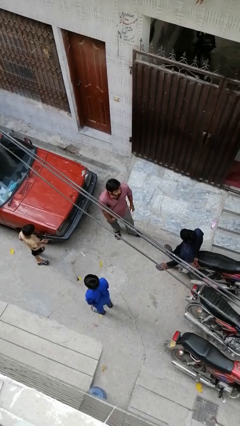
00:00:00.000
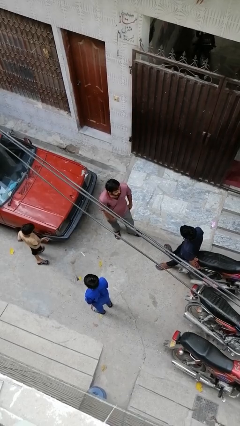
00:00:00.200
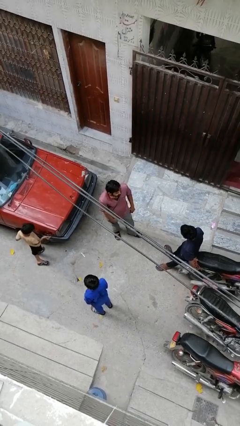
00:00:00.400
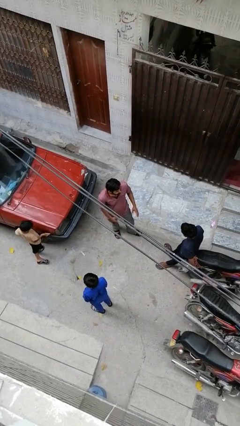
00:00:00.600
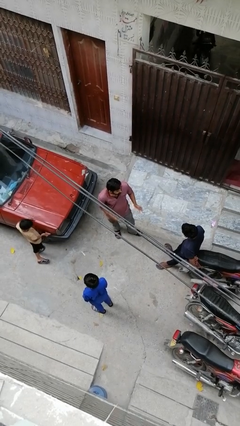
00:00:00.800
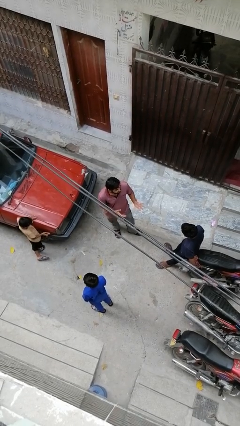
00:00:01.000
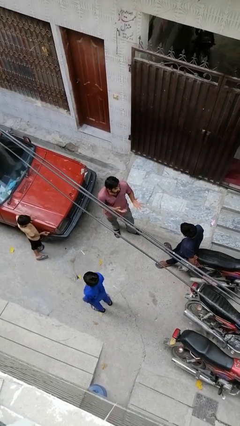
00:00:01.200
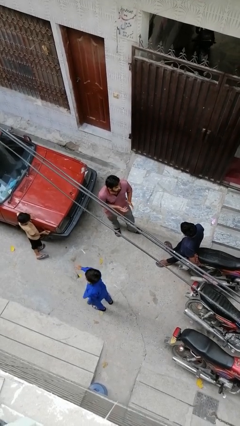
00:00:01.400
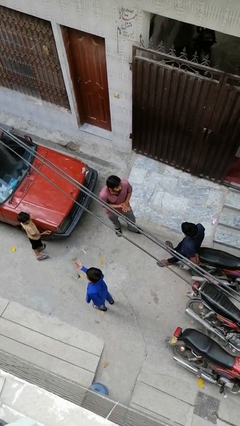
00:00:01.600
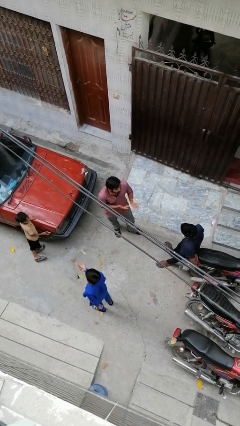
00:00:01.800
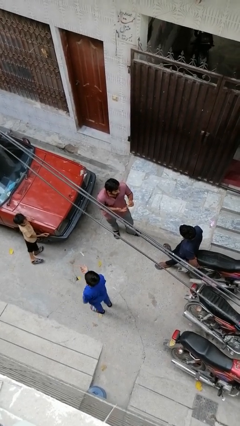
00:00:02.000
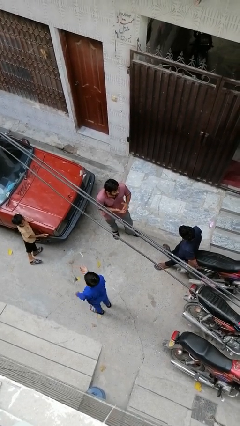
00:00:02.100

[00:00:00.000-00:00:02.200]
person talks to person

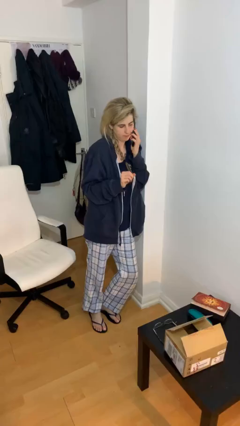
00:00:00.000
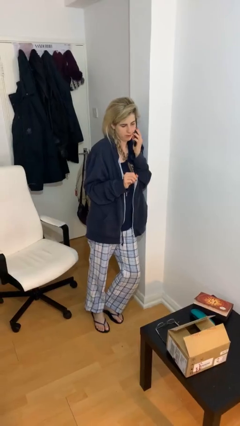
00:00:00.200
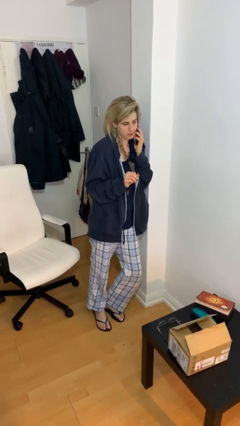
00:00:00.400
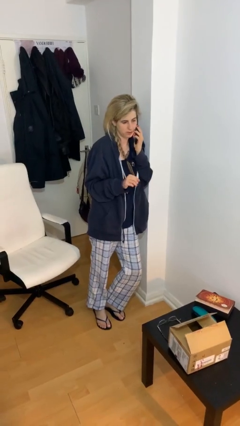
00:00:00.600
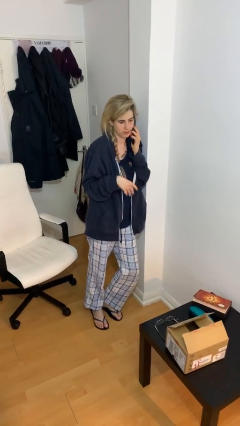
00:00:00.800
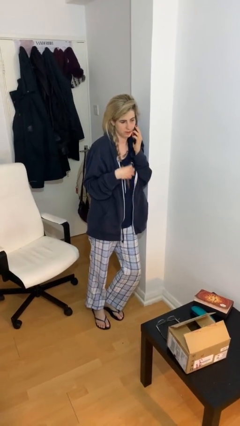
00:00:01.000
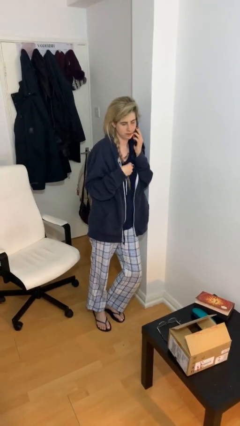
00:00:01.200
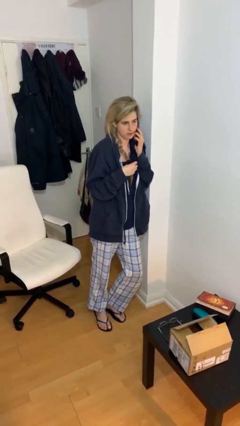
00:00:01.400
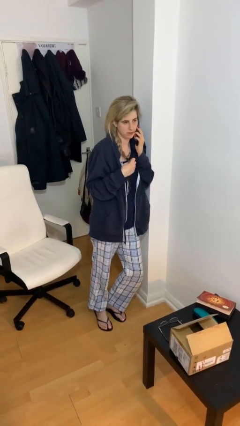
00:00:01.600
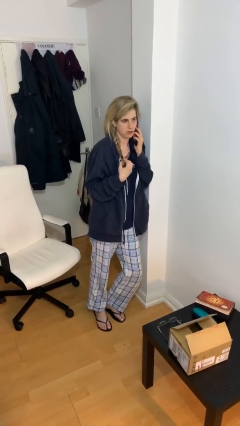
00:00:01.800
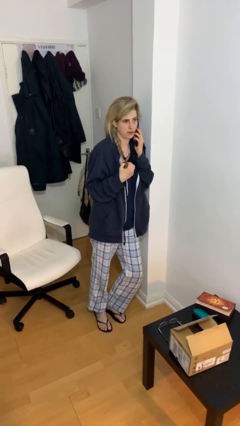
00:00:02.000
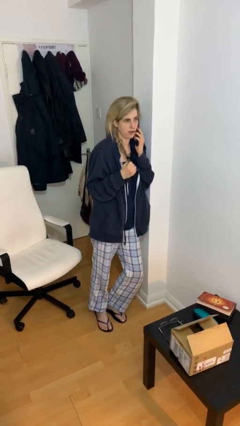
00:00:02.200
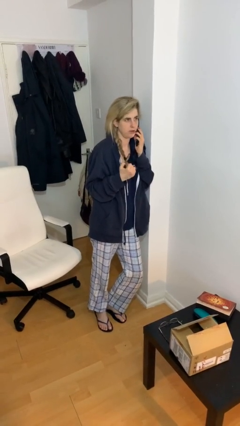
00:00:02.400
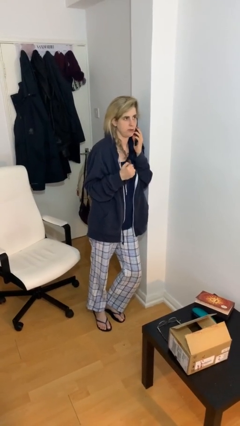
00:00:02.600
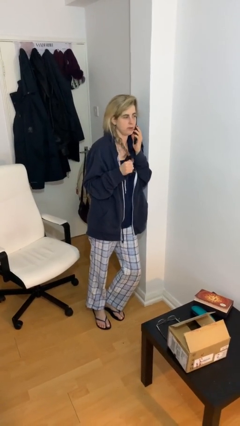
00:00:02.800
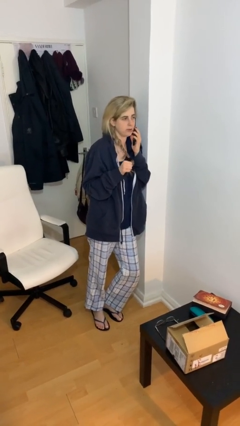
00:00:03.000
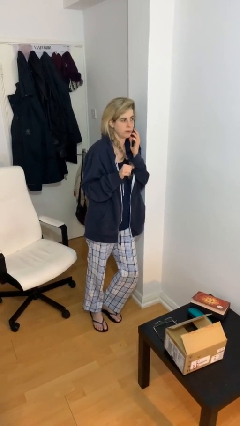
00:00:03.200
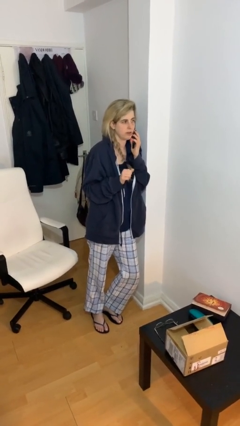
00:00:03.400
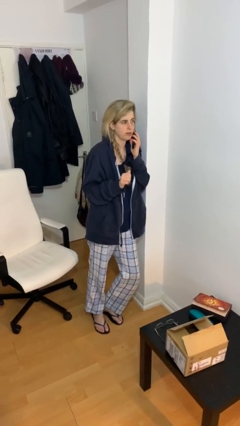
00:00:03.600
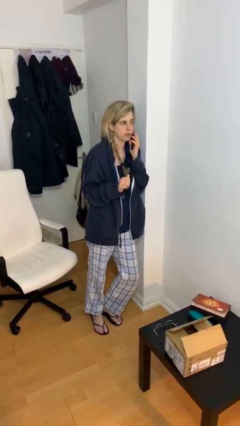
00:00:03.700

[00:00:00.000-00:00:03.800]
person talks on phone

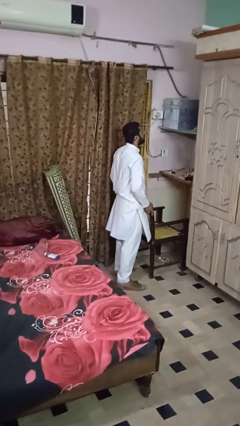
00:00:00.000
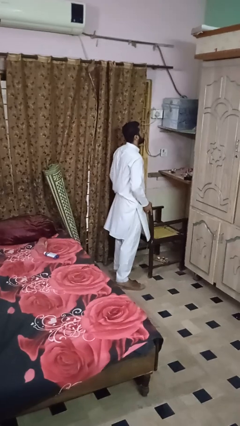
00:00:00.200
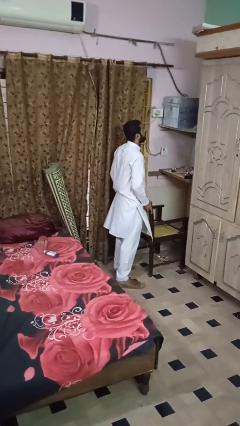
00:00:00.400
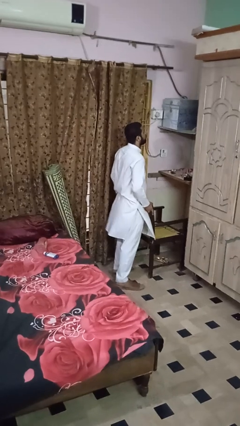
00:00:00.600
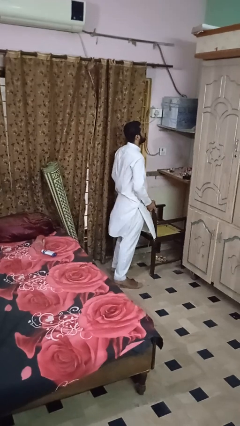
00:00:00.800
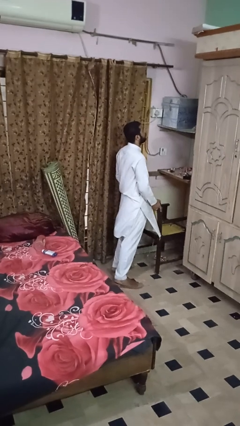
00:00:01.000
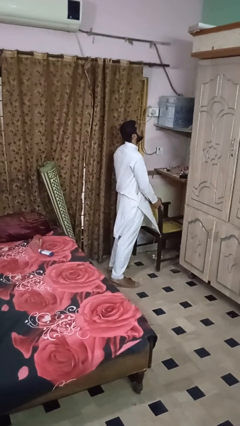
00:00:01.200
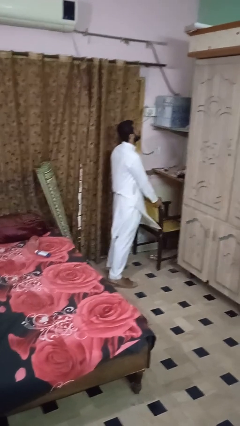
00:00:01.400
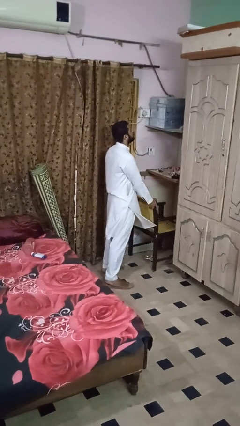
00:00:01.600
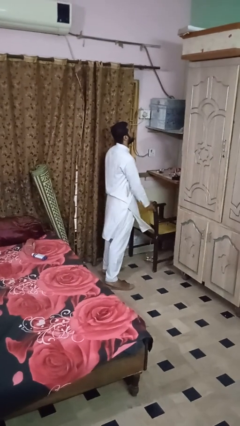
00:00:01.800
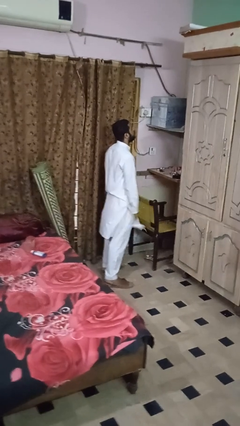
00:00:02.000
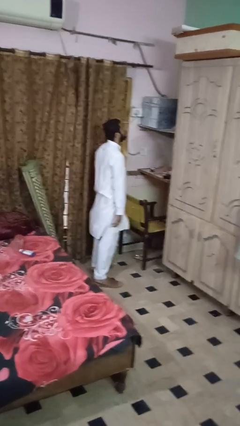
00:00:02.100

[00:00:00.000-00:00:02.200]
person pushes in chair

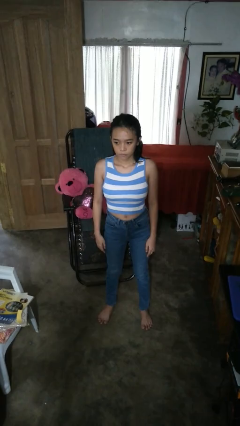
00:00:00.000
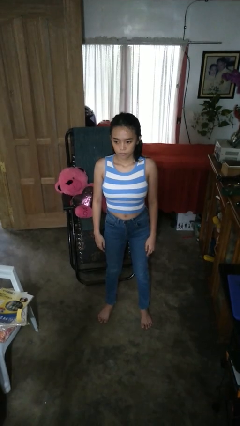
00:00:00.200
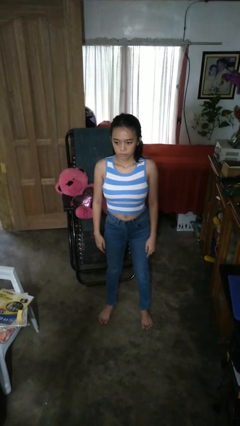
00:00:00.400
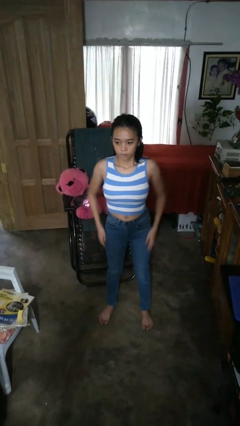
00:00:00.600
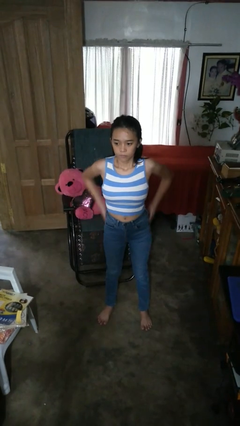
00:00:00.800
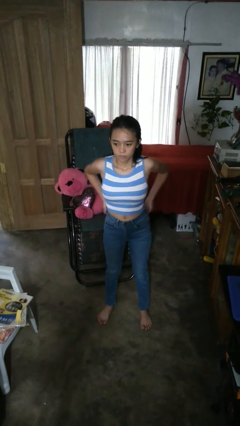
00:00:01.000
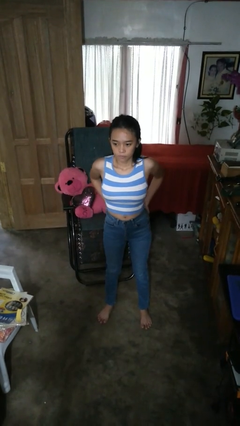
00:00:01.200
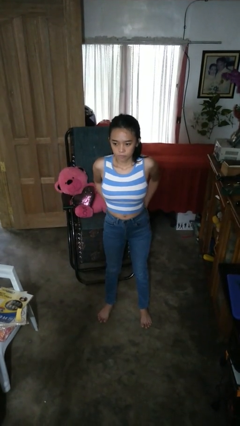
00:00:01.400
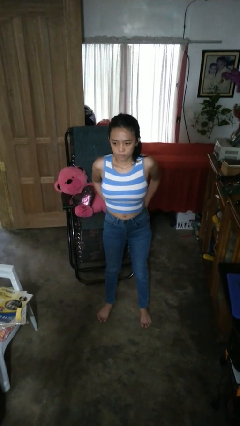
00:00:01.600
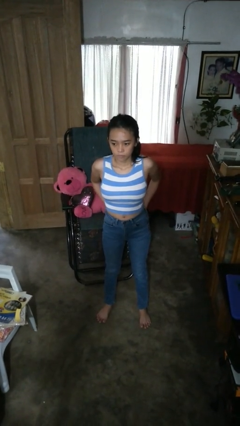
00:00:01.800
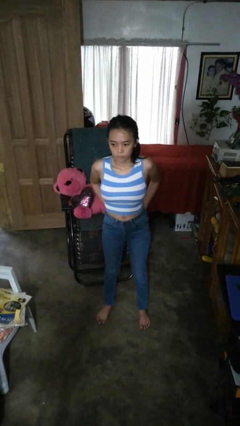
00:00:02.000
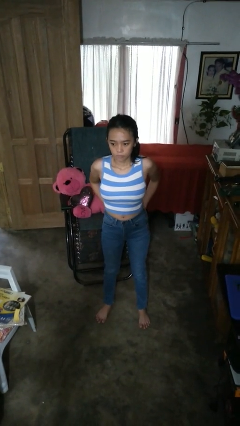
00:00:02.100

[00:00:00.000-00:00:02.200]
person puts hands in back pockets

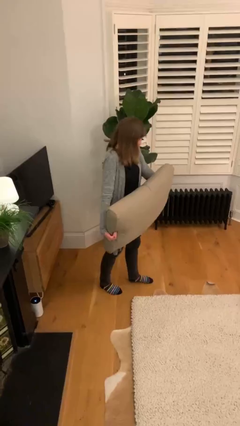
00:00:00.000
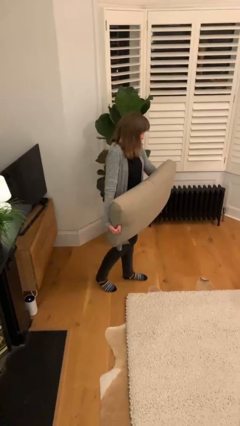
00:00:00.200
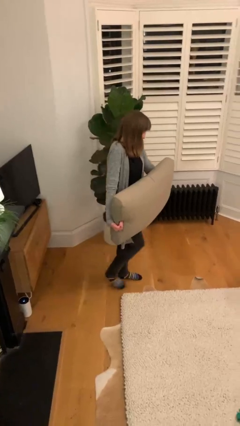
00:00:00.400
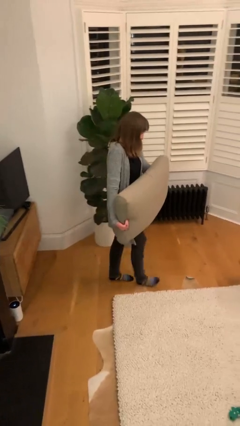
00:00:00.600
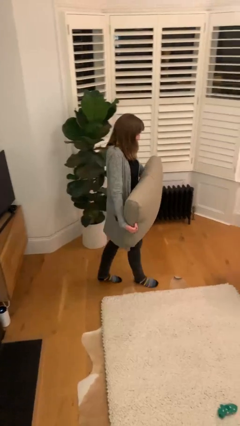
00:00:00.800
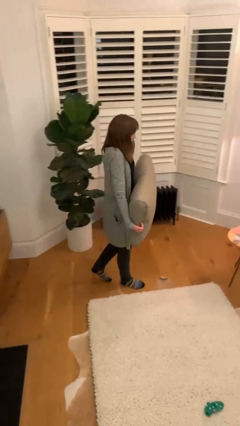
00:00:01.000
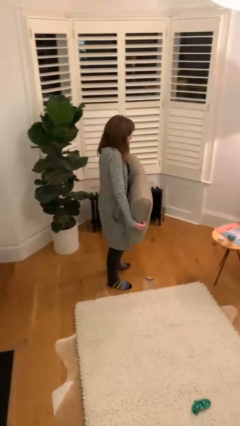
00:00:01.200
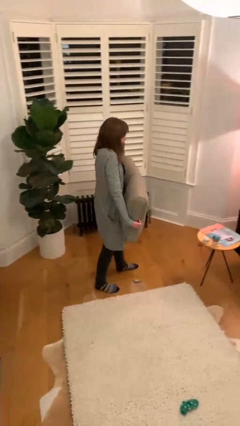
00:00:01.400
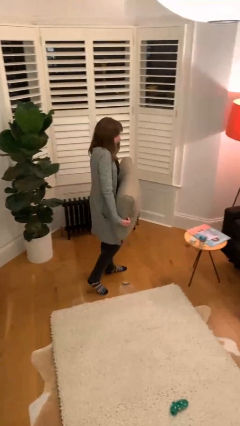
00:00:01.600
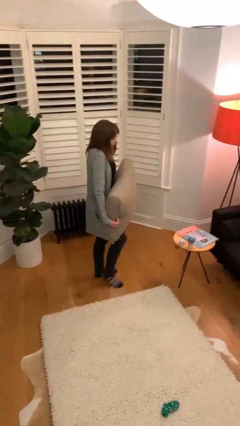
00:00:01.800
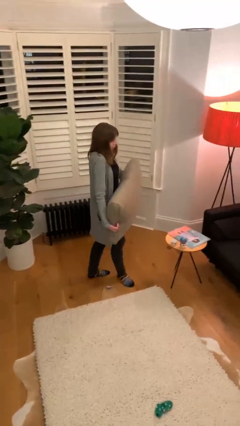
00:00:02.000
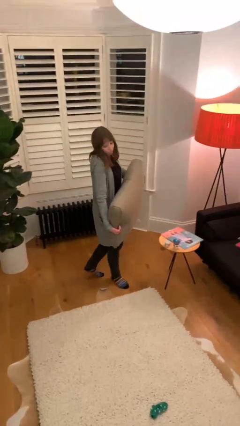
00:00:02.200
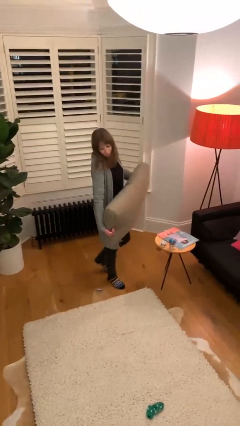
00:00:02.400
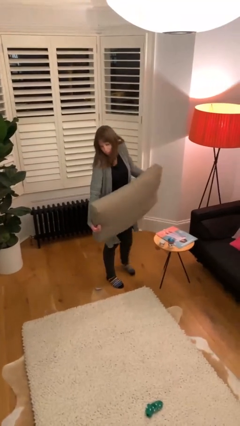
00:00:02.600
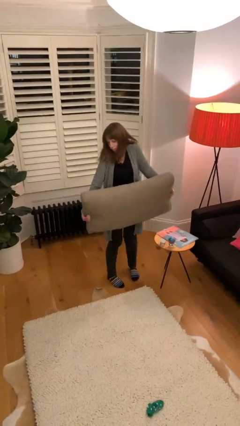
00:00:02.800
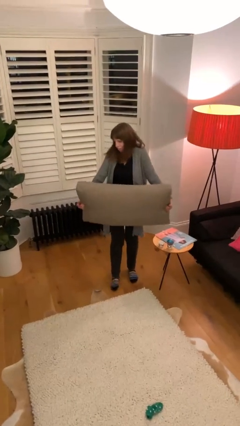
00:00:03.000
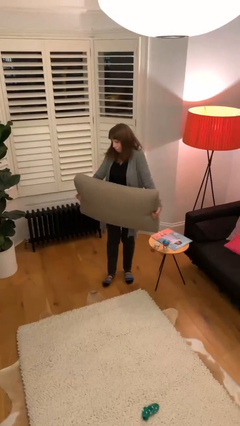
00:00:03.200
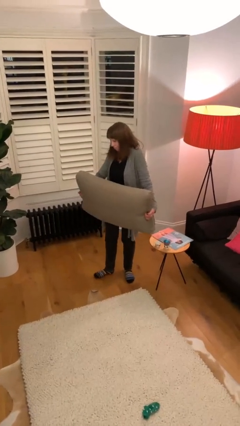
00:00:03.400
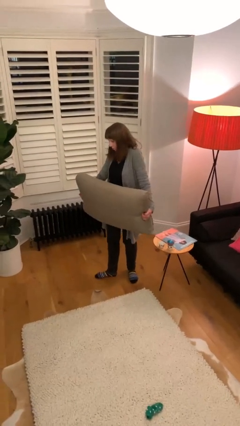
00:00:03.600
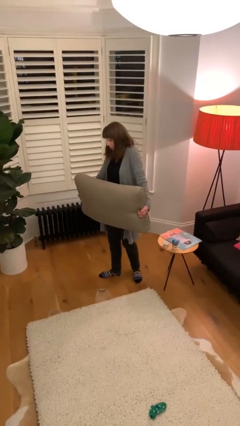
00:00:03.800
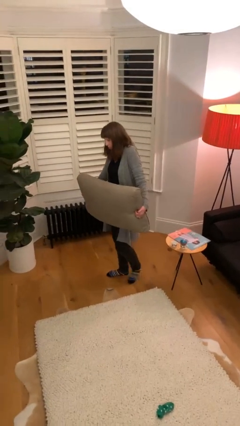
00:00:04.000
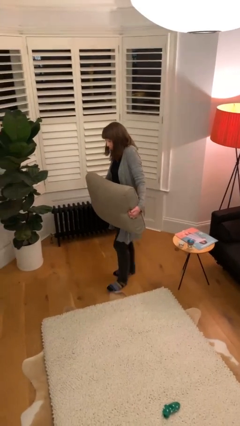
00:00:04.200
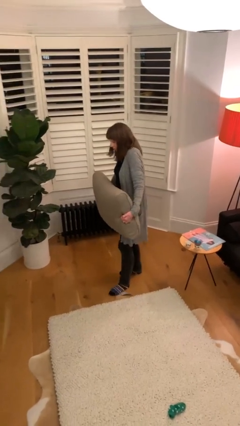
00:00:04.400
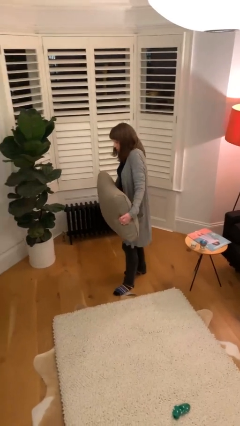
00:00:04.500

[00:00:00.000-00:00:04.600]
person carries heavy object

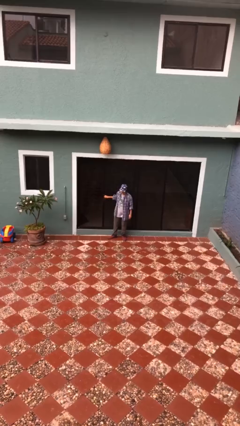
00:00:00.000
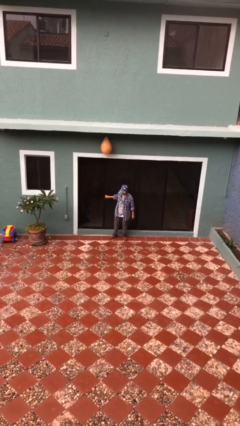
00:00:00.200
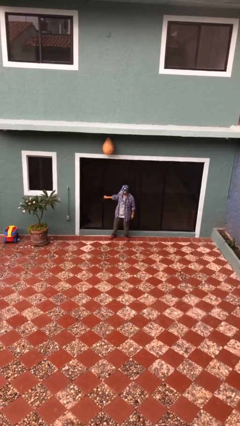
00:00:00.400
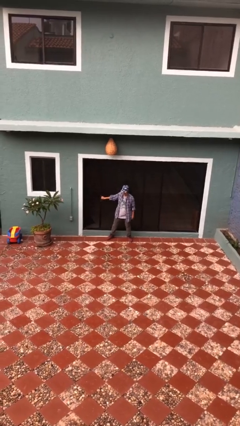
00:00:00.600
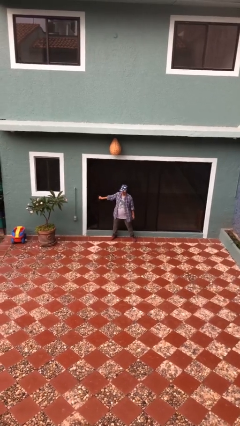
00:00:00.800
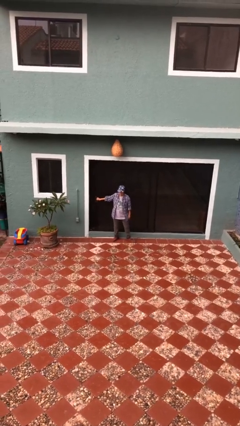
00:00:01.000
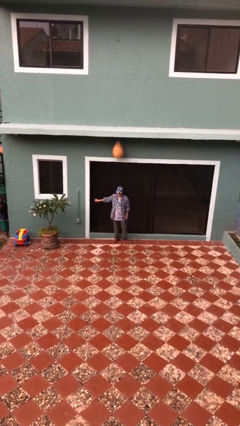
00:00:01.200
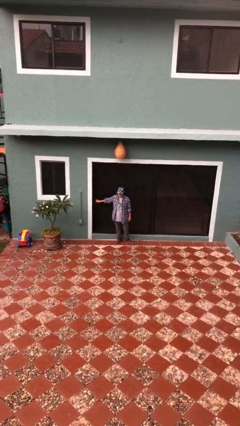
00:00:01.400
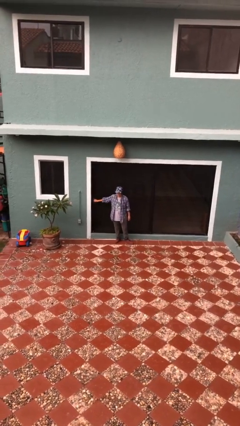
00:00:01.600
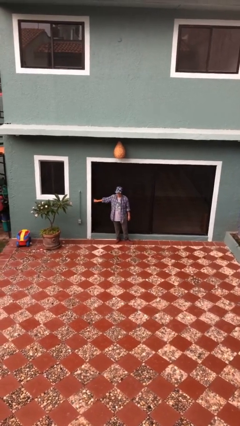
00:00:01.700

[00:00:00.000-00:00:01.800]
person closes sliding door

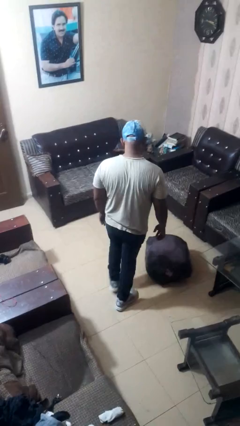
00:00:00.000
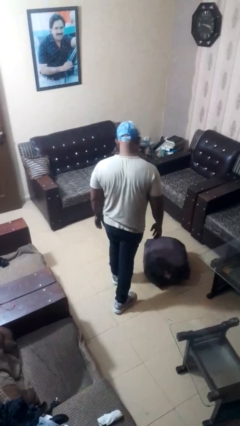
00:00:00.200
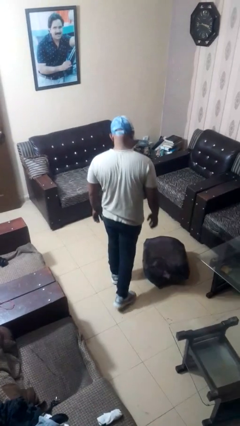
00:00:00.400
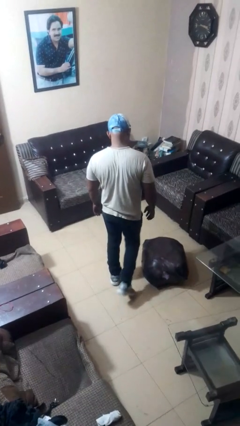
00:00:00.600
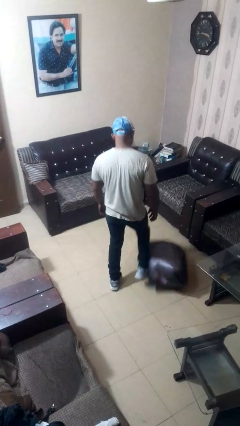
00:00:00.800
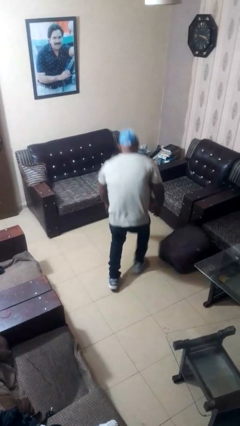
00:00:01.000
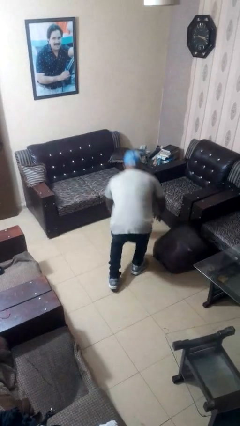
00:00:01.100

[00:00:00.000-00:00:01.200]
person trips on object on floor
